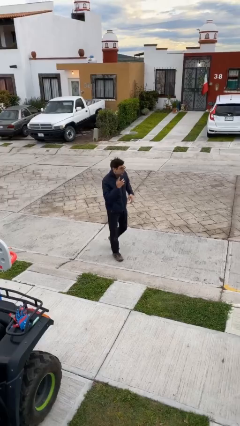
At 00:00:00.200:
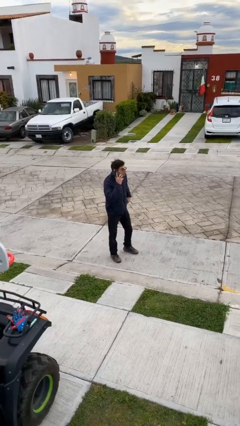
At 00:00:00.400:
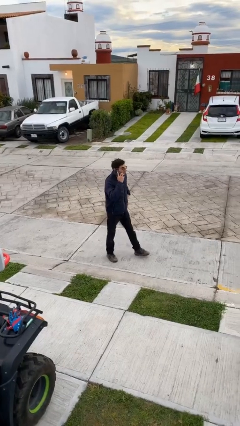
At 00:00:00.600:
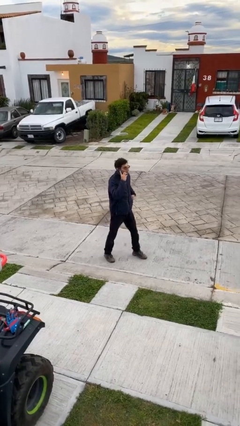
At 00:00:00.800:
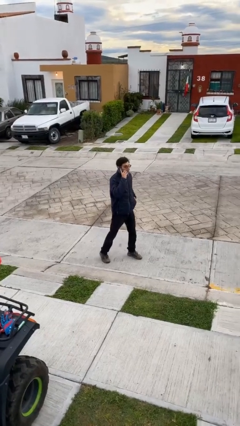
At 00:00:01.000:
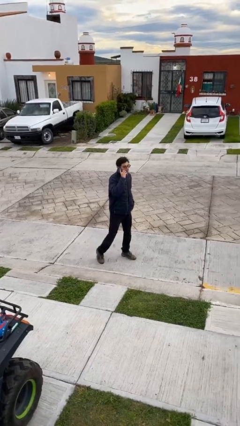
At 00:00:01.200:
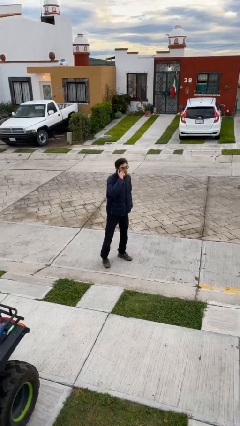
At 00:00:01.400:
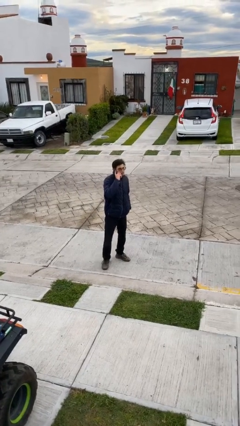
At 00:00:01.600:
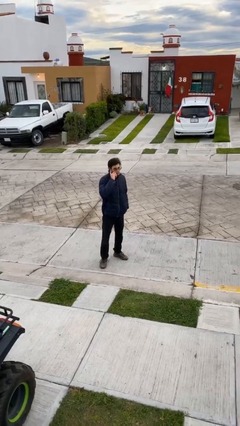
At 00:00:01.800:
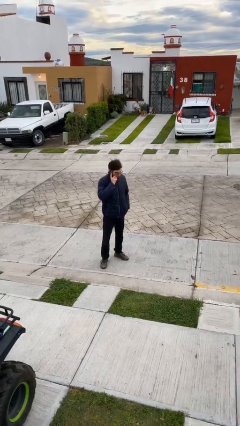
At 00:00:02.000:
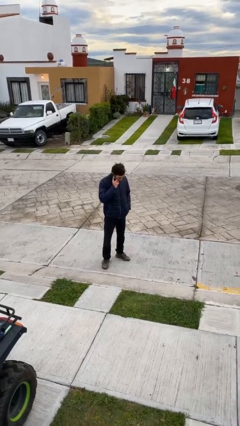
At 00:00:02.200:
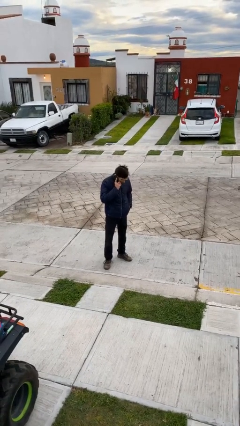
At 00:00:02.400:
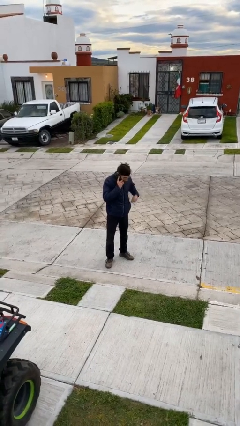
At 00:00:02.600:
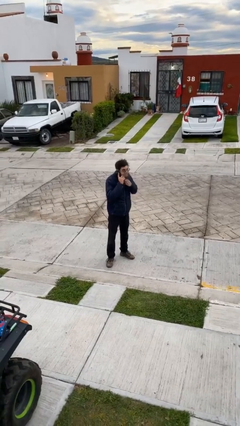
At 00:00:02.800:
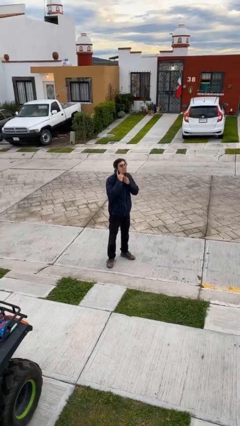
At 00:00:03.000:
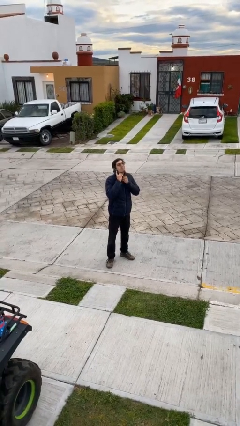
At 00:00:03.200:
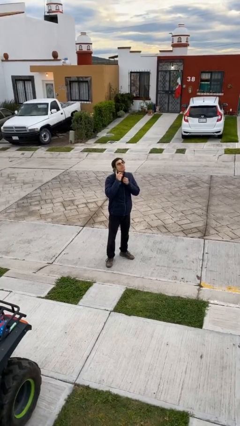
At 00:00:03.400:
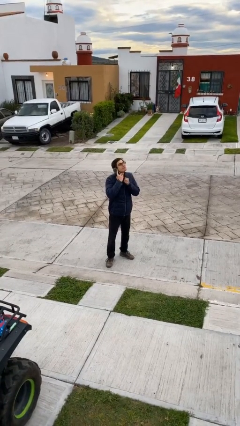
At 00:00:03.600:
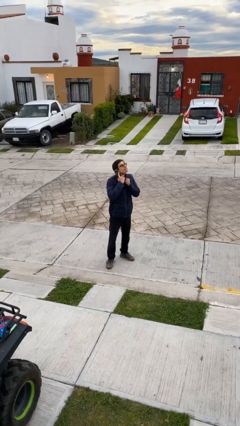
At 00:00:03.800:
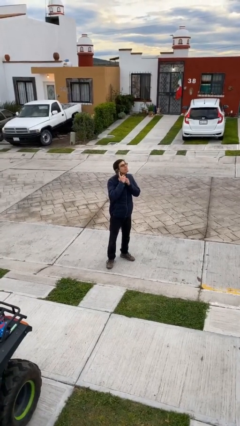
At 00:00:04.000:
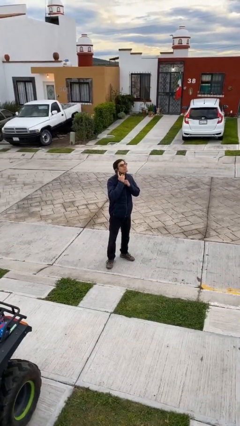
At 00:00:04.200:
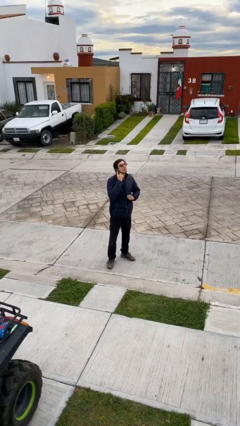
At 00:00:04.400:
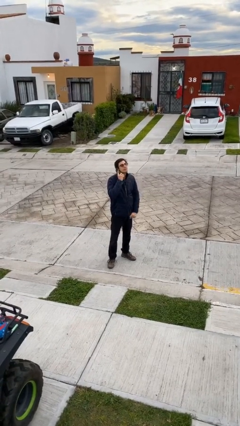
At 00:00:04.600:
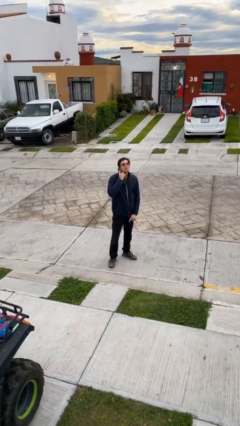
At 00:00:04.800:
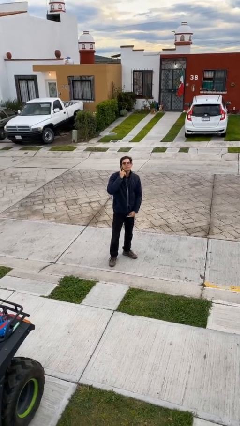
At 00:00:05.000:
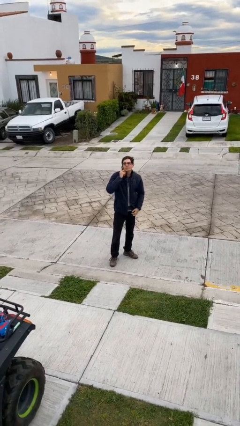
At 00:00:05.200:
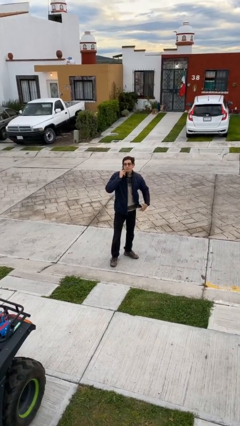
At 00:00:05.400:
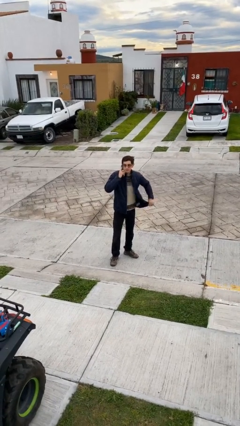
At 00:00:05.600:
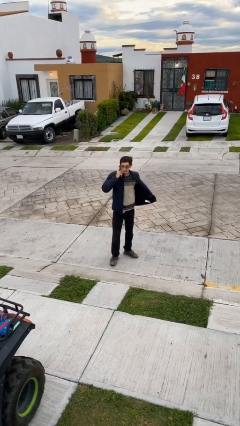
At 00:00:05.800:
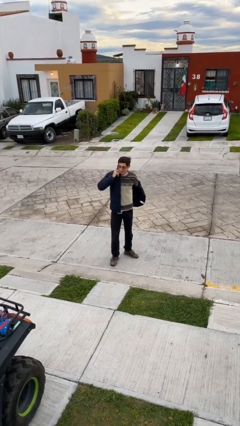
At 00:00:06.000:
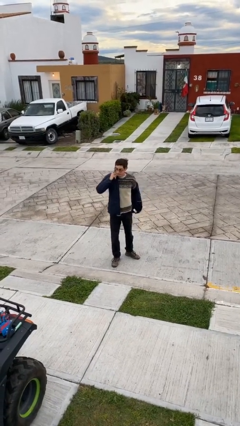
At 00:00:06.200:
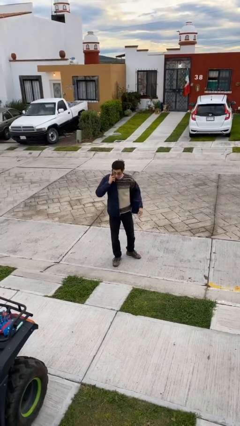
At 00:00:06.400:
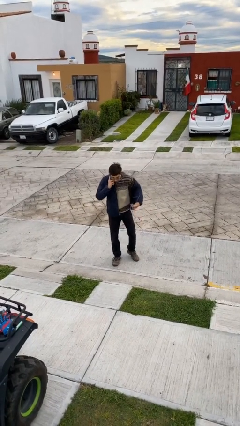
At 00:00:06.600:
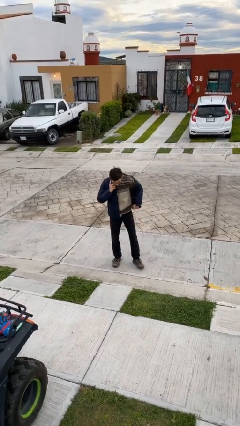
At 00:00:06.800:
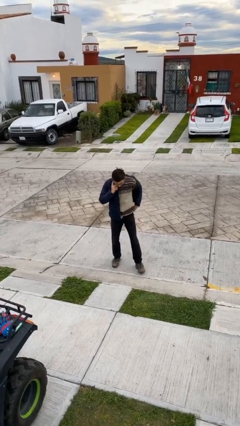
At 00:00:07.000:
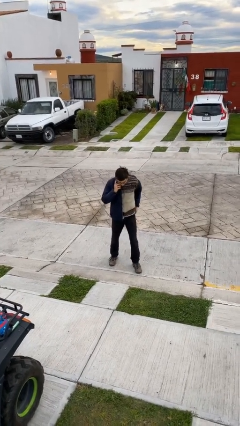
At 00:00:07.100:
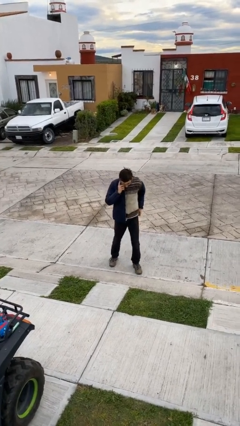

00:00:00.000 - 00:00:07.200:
person talks on phone

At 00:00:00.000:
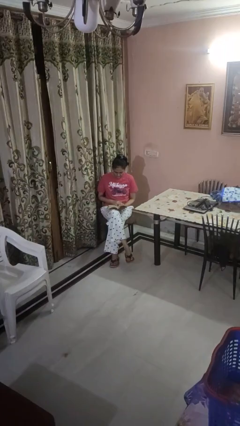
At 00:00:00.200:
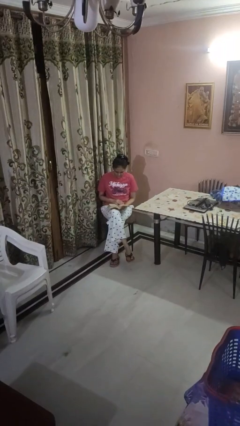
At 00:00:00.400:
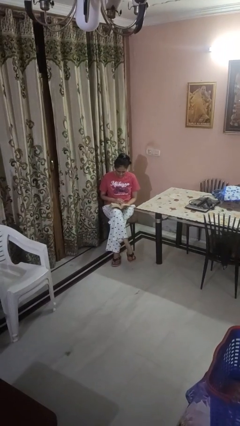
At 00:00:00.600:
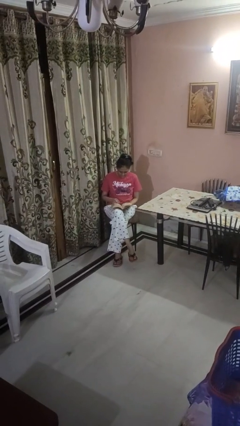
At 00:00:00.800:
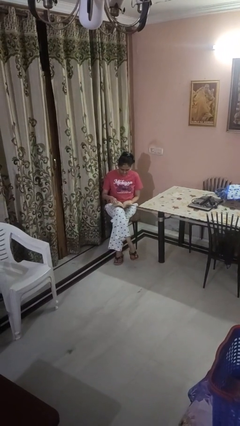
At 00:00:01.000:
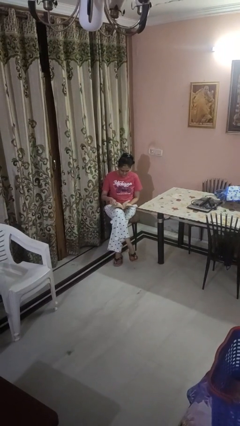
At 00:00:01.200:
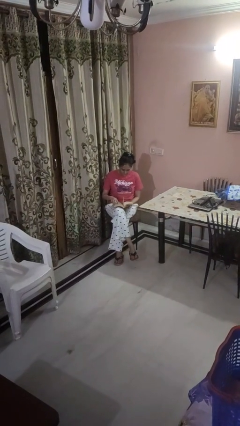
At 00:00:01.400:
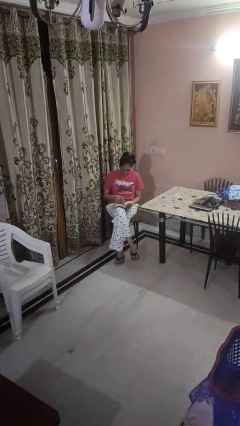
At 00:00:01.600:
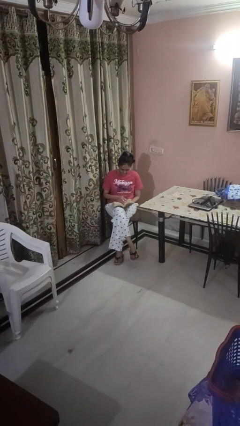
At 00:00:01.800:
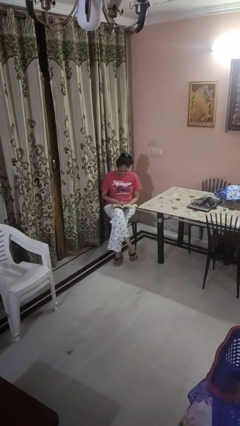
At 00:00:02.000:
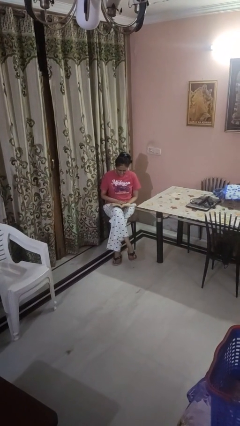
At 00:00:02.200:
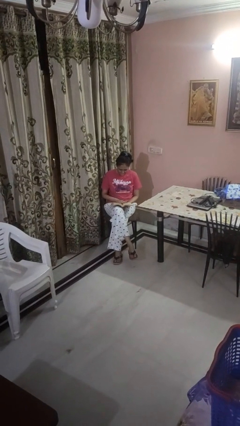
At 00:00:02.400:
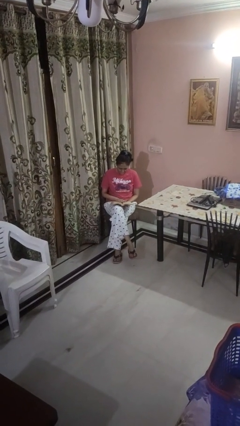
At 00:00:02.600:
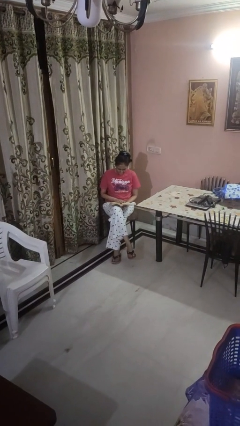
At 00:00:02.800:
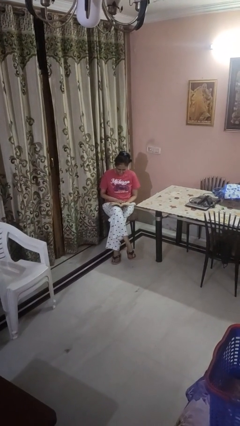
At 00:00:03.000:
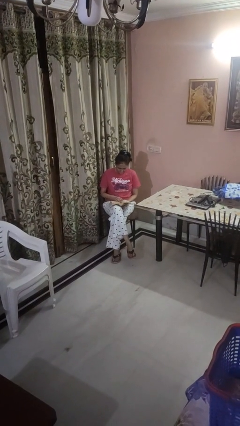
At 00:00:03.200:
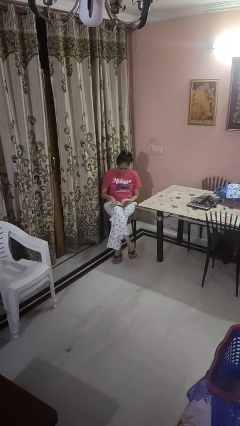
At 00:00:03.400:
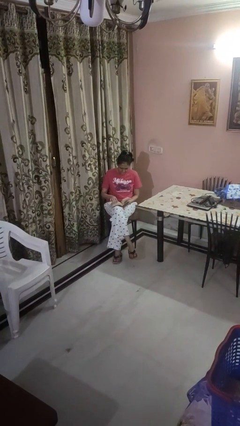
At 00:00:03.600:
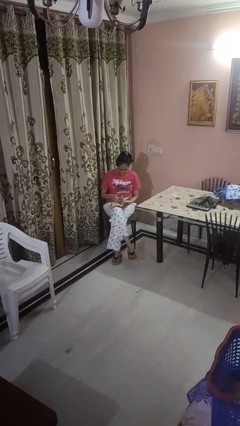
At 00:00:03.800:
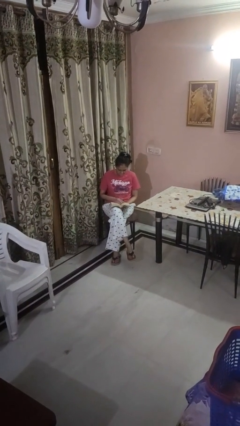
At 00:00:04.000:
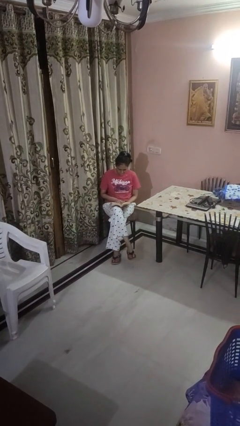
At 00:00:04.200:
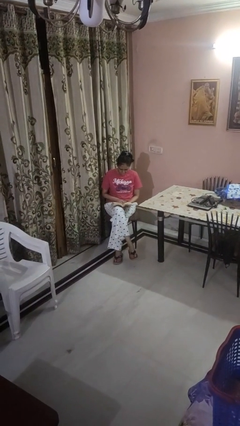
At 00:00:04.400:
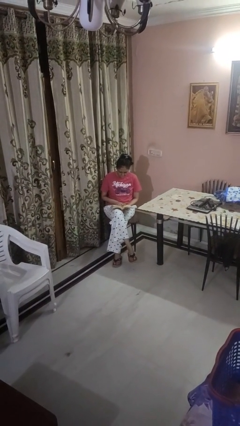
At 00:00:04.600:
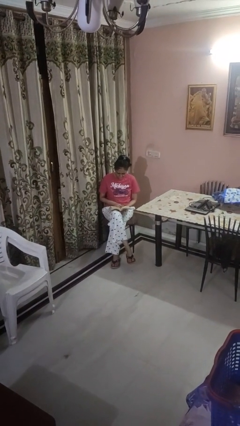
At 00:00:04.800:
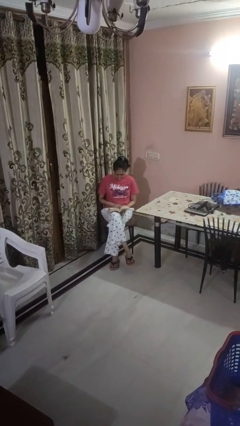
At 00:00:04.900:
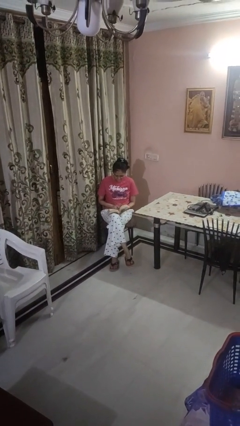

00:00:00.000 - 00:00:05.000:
person reads book

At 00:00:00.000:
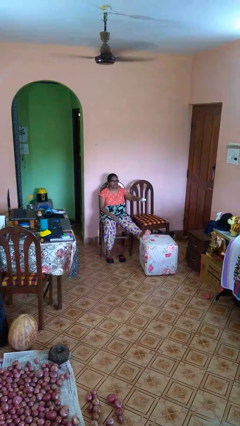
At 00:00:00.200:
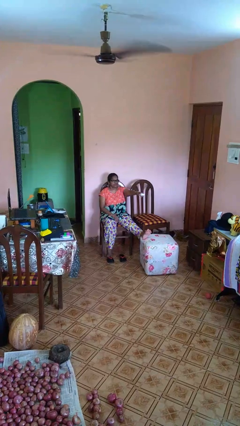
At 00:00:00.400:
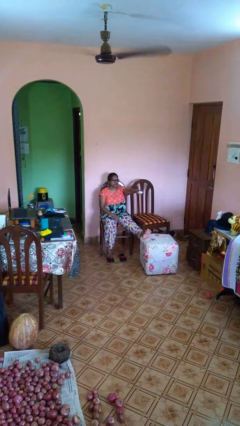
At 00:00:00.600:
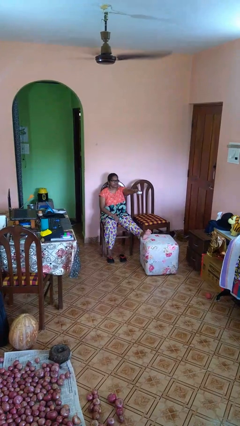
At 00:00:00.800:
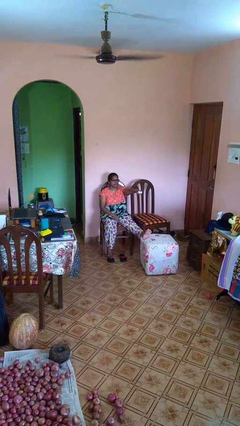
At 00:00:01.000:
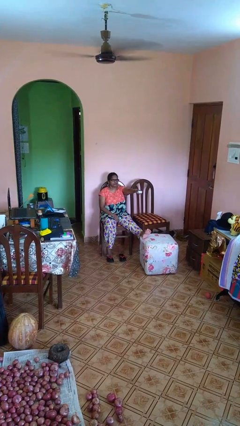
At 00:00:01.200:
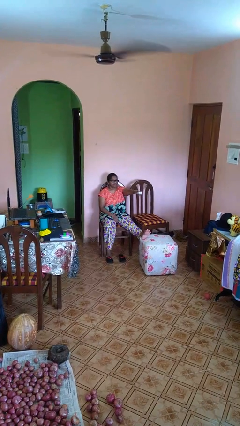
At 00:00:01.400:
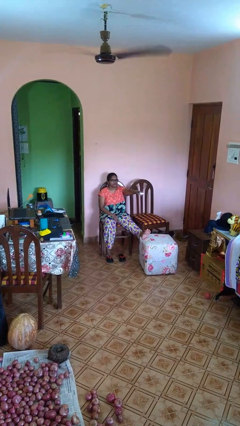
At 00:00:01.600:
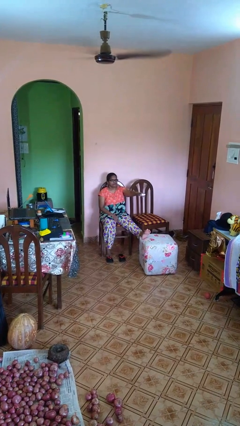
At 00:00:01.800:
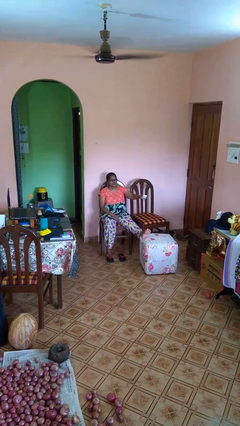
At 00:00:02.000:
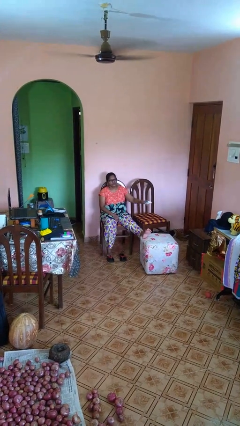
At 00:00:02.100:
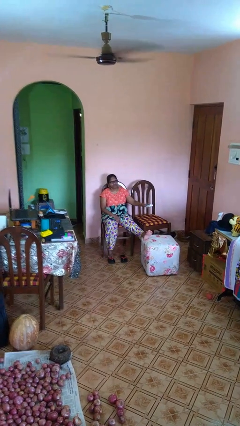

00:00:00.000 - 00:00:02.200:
person uses television remote

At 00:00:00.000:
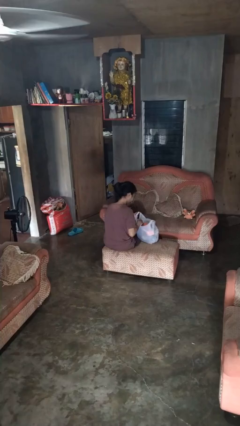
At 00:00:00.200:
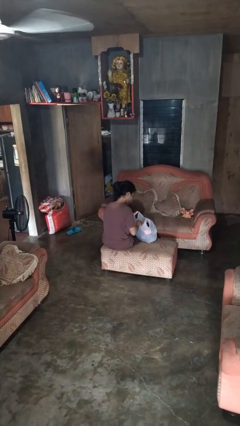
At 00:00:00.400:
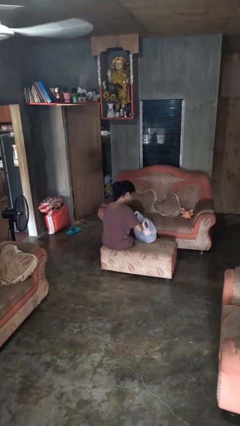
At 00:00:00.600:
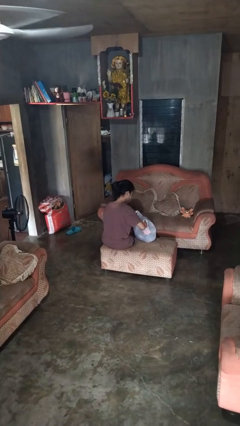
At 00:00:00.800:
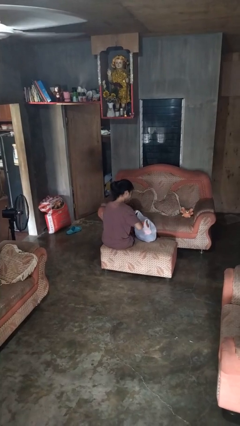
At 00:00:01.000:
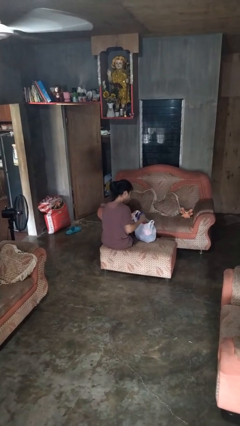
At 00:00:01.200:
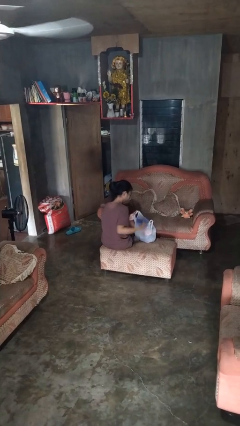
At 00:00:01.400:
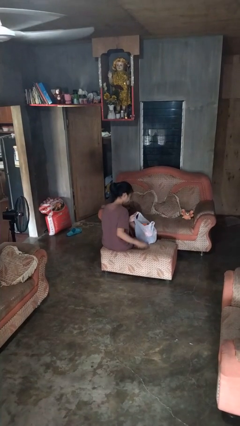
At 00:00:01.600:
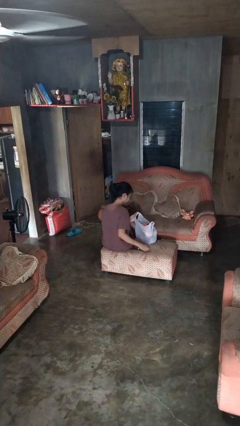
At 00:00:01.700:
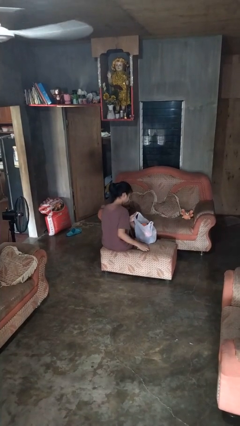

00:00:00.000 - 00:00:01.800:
person takes object from bag

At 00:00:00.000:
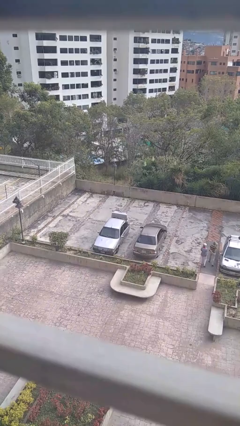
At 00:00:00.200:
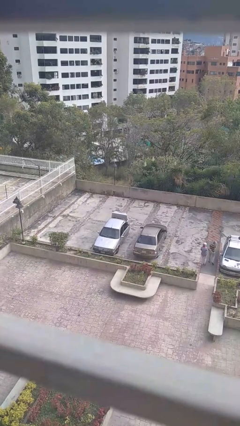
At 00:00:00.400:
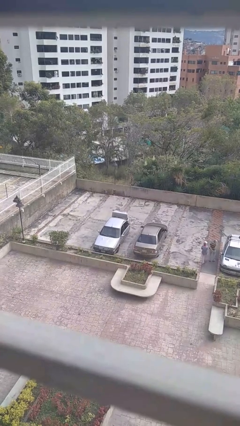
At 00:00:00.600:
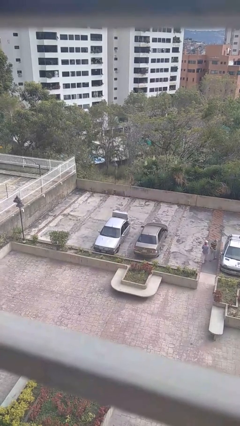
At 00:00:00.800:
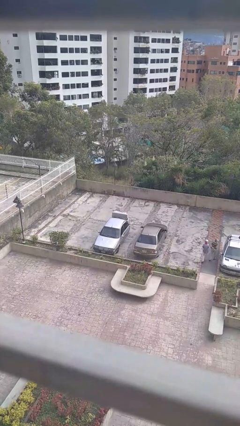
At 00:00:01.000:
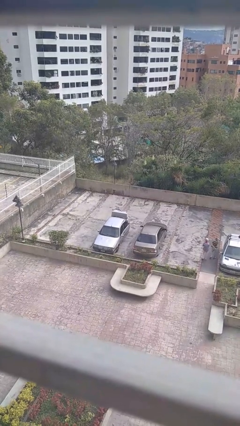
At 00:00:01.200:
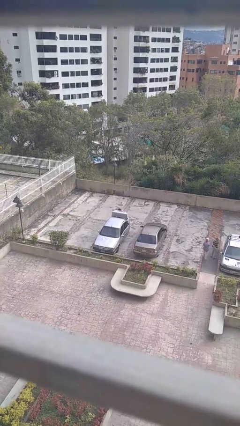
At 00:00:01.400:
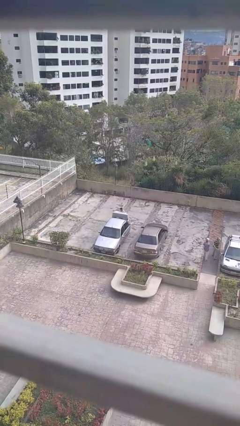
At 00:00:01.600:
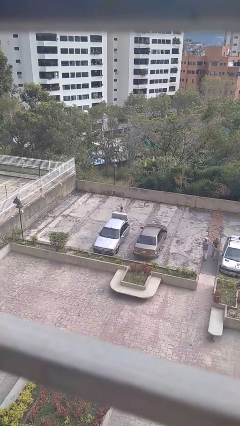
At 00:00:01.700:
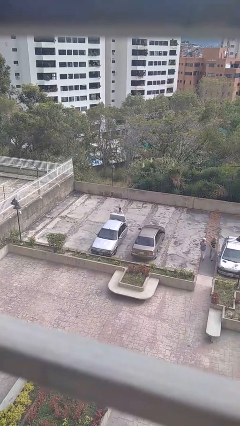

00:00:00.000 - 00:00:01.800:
person unloads car
